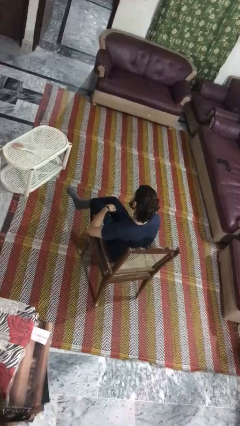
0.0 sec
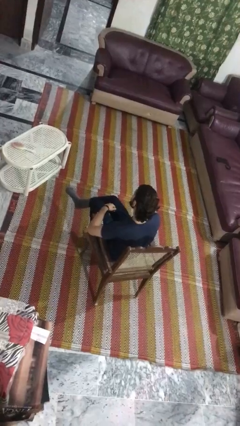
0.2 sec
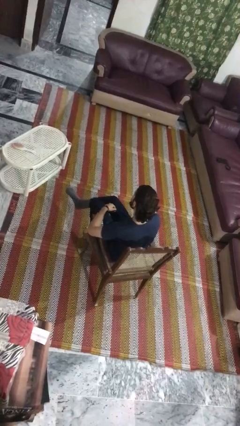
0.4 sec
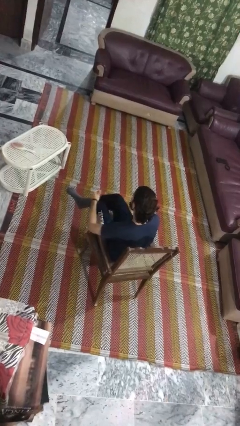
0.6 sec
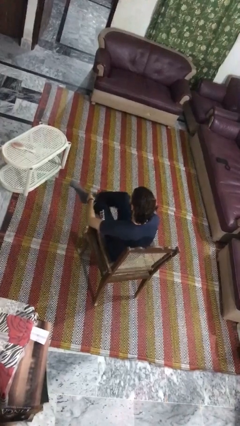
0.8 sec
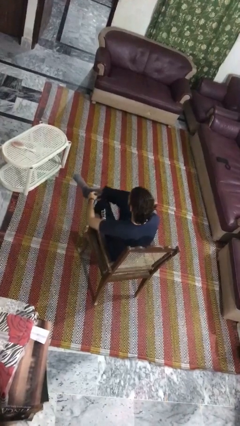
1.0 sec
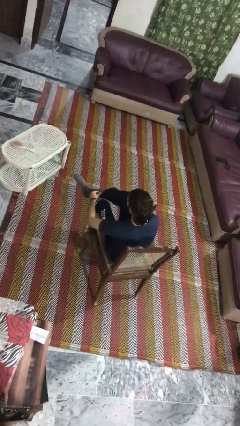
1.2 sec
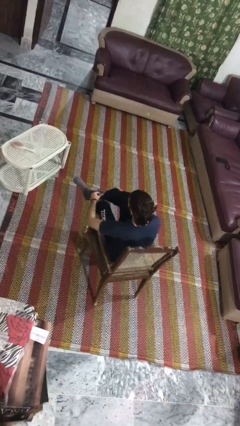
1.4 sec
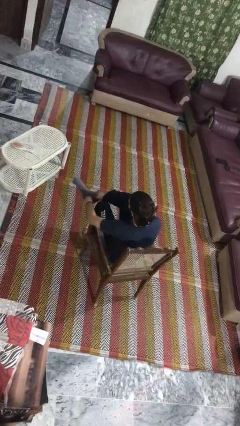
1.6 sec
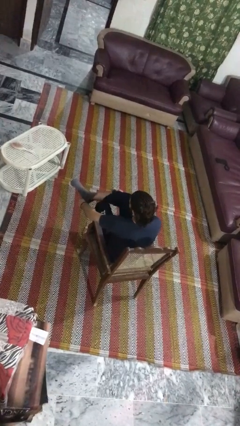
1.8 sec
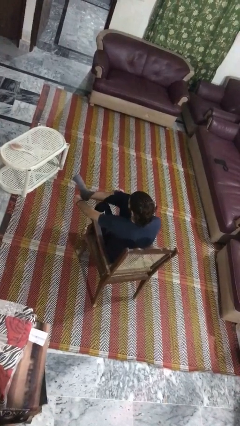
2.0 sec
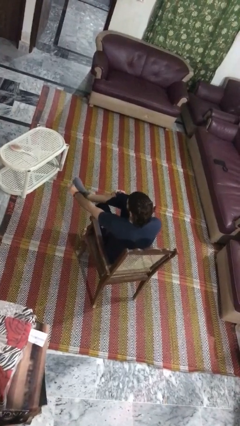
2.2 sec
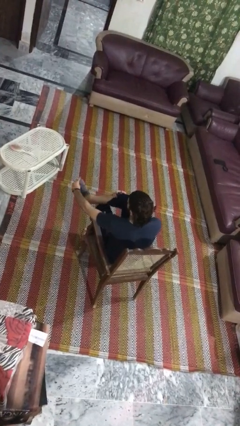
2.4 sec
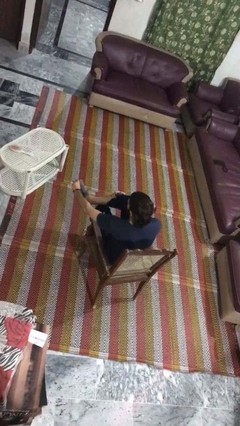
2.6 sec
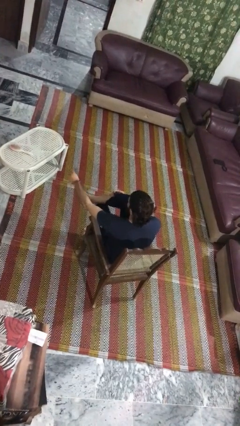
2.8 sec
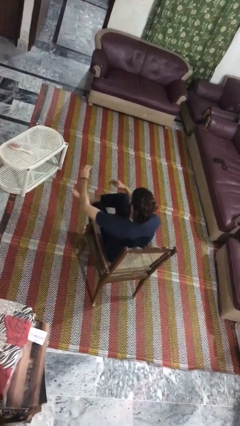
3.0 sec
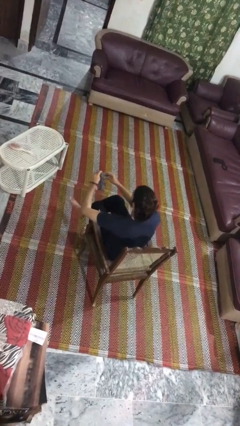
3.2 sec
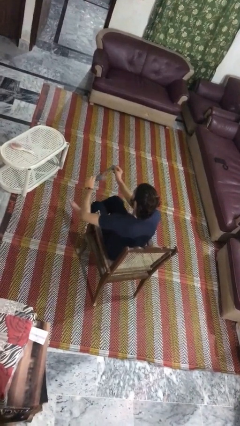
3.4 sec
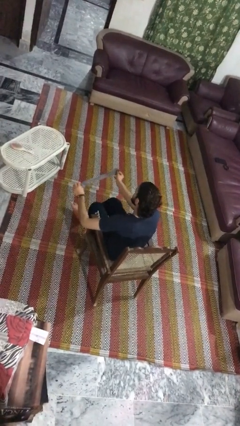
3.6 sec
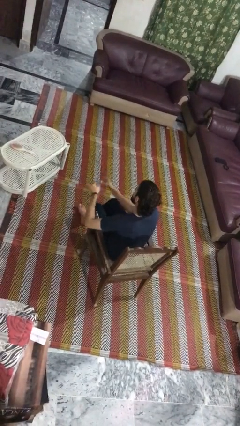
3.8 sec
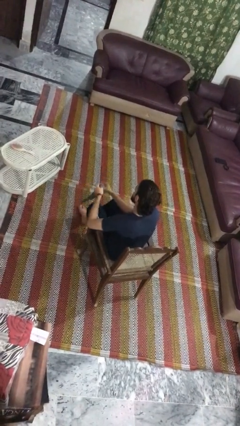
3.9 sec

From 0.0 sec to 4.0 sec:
person takes off socks

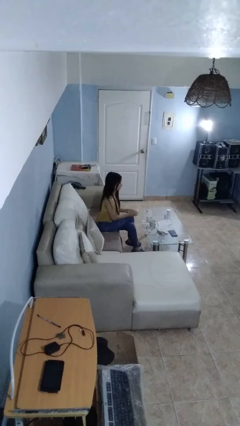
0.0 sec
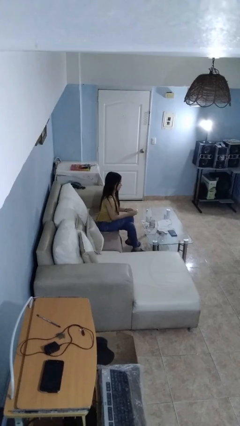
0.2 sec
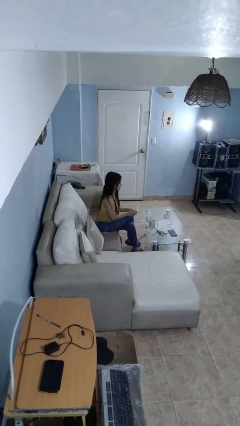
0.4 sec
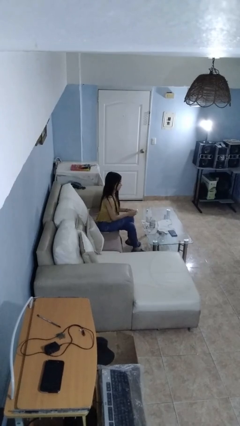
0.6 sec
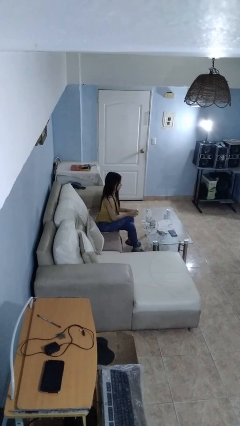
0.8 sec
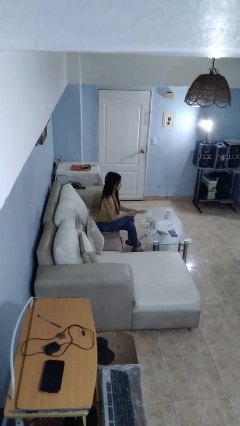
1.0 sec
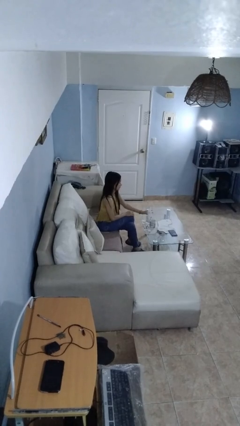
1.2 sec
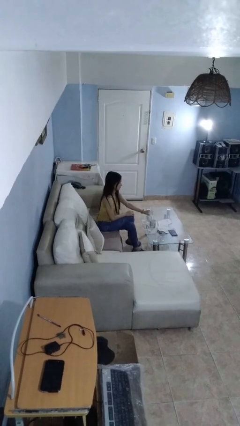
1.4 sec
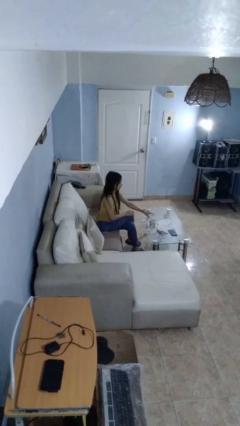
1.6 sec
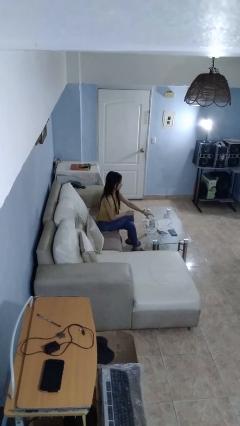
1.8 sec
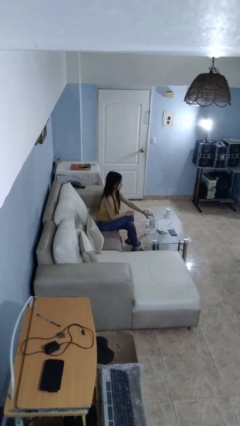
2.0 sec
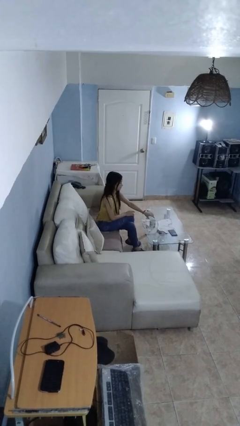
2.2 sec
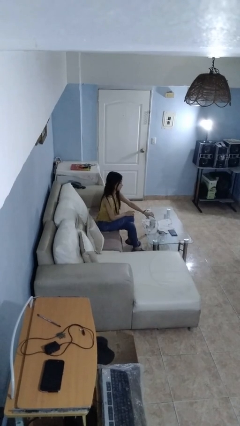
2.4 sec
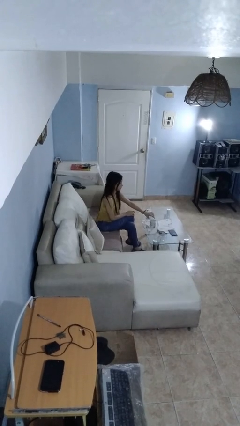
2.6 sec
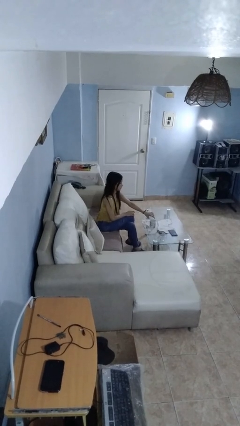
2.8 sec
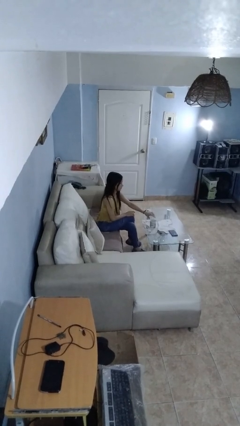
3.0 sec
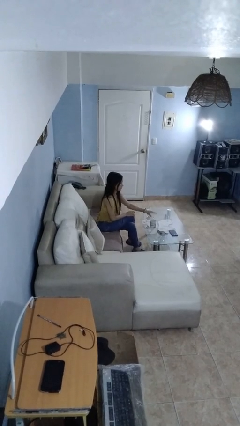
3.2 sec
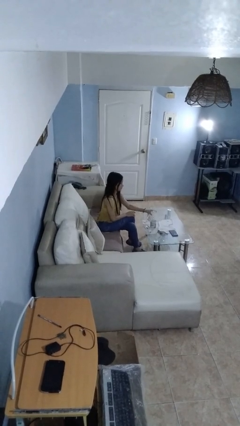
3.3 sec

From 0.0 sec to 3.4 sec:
person pours liquid into cup

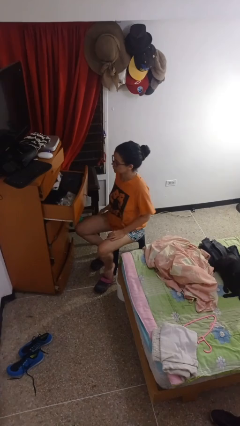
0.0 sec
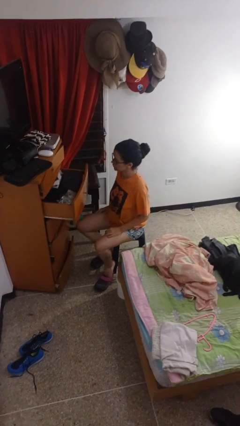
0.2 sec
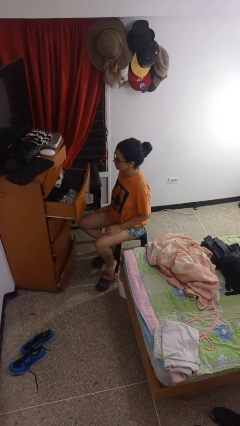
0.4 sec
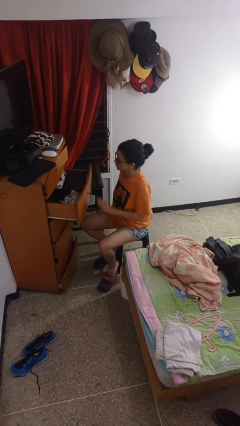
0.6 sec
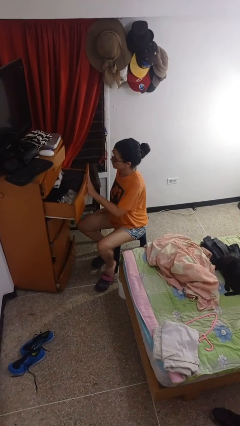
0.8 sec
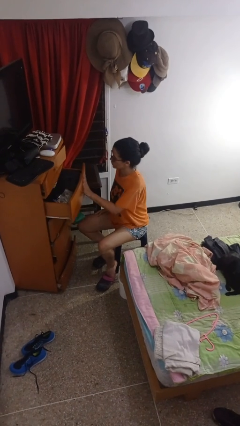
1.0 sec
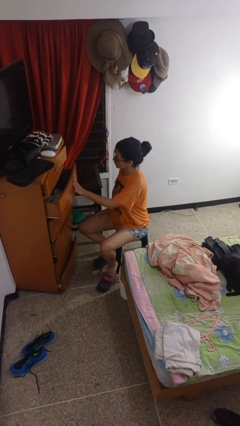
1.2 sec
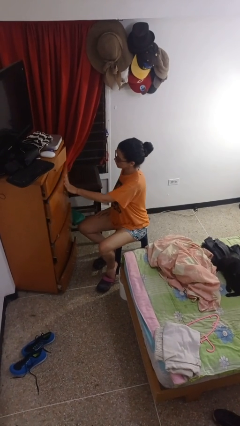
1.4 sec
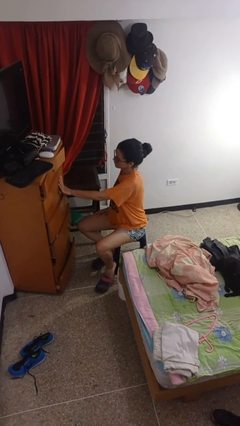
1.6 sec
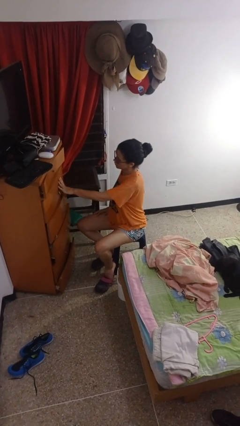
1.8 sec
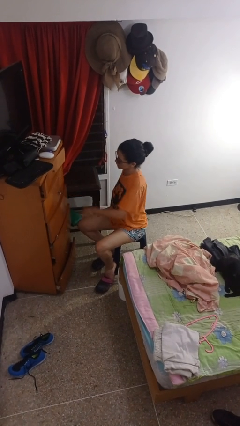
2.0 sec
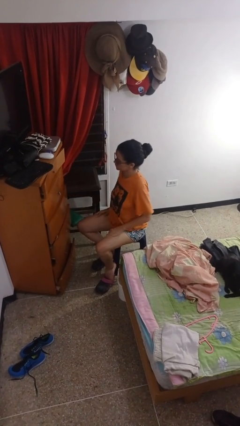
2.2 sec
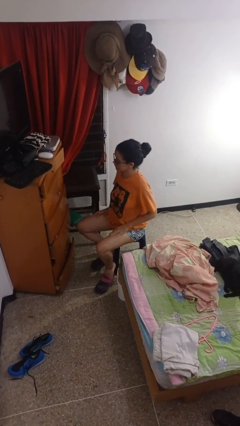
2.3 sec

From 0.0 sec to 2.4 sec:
person closes dresser drawer

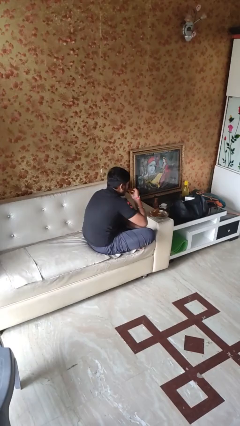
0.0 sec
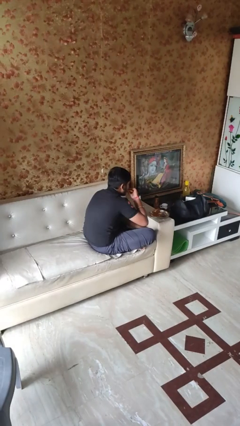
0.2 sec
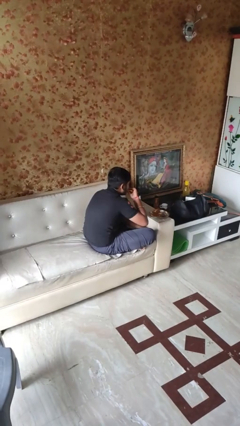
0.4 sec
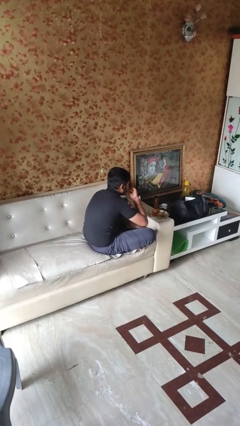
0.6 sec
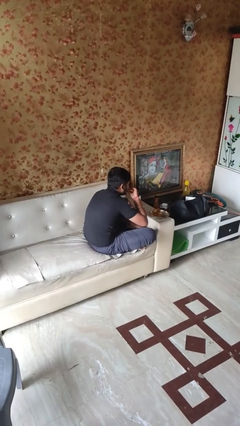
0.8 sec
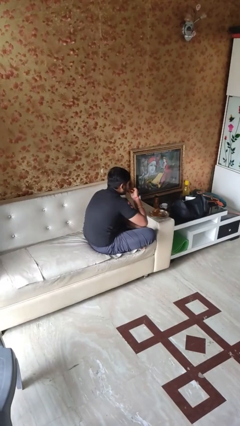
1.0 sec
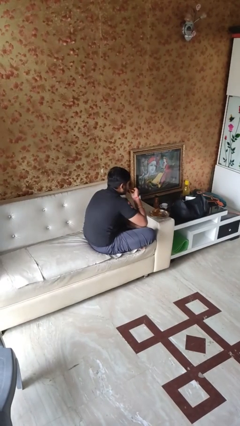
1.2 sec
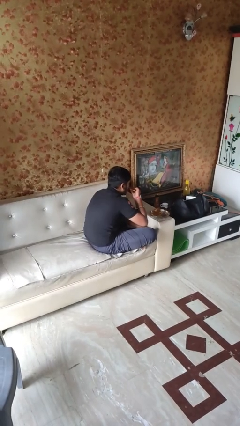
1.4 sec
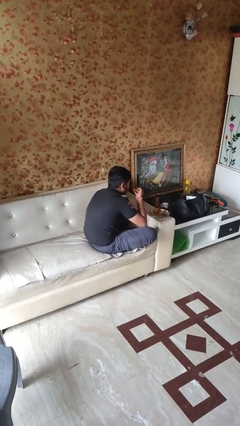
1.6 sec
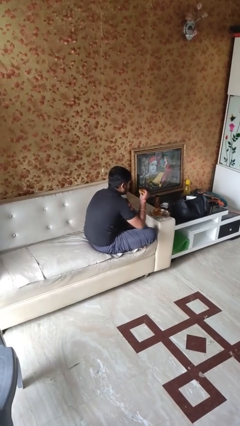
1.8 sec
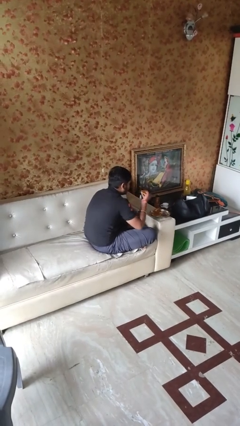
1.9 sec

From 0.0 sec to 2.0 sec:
person eats with hands

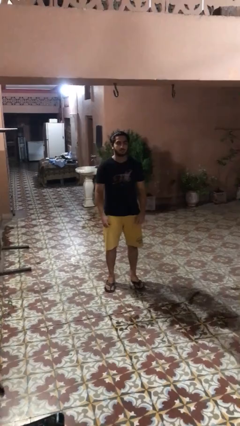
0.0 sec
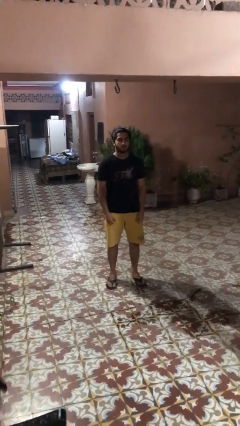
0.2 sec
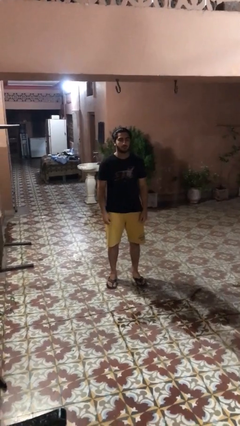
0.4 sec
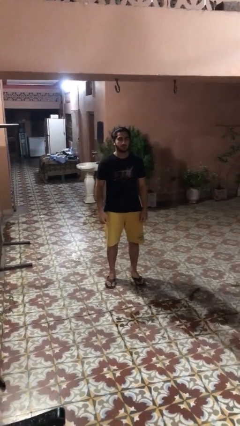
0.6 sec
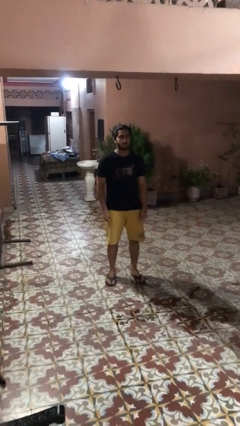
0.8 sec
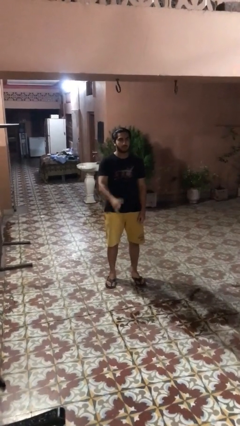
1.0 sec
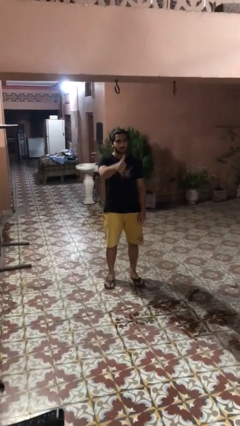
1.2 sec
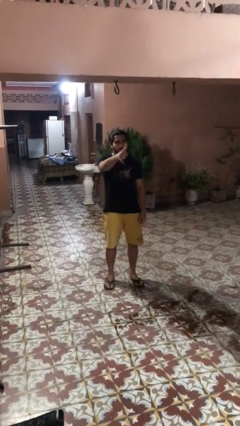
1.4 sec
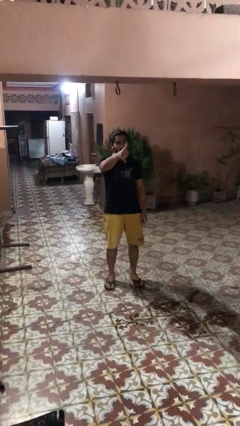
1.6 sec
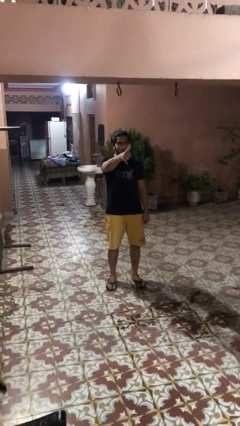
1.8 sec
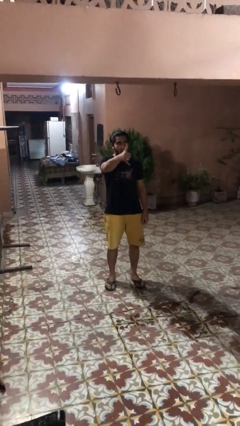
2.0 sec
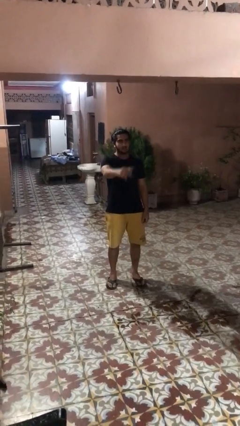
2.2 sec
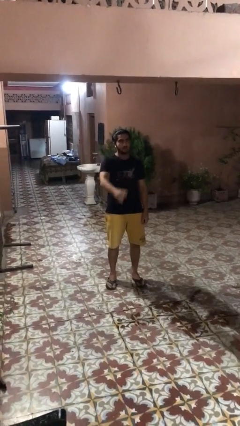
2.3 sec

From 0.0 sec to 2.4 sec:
person gestures hang loose

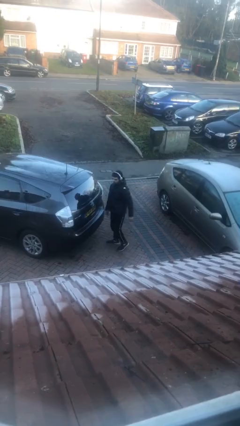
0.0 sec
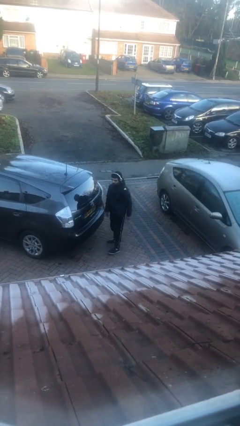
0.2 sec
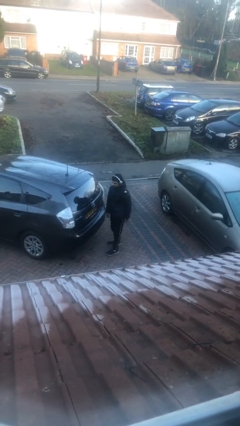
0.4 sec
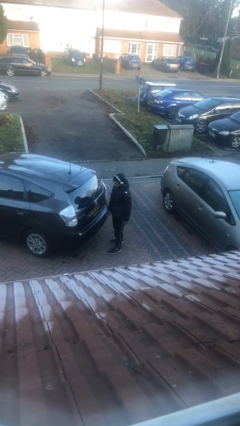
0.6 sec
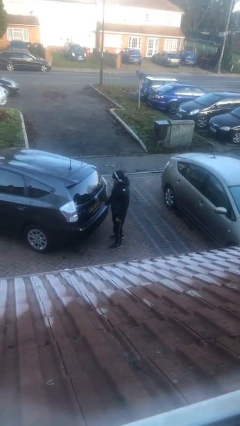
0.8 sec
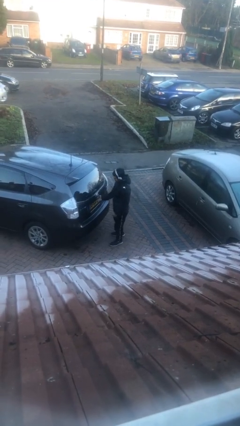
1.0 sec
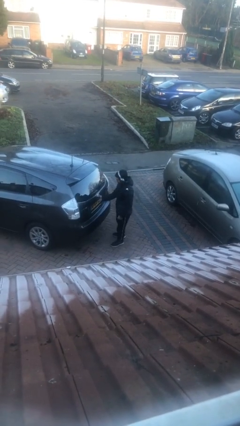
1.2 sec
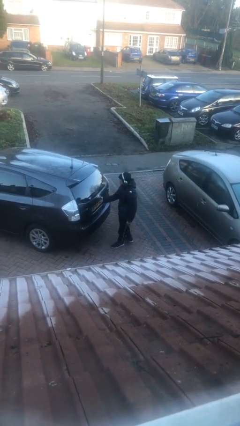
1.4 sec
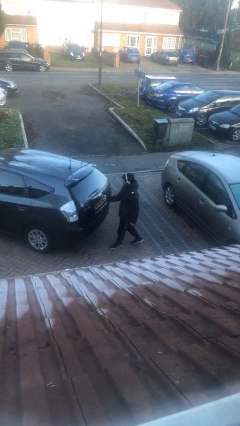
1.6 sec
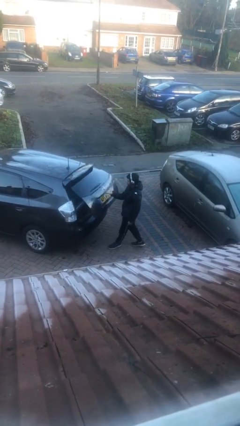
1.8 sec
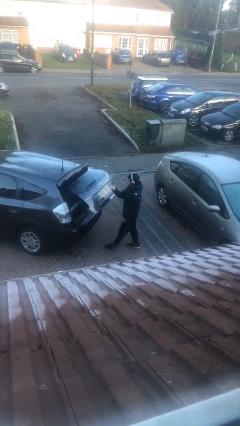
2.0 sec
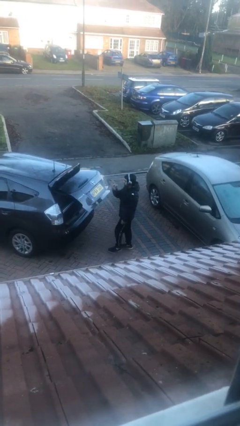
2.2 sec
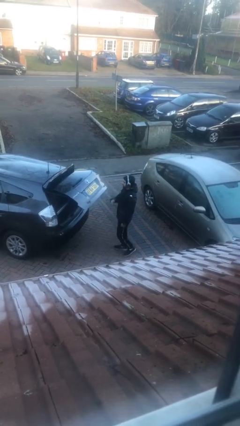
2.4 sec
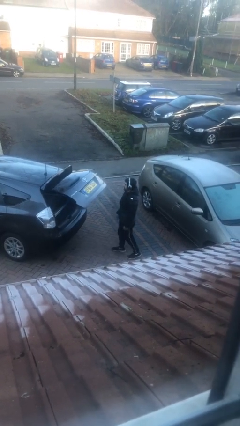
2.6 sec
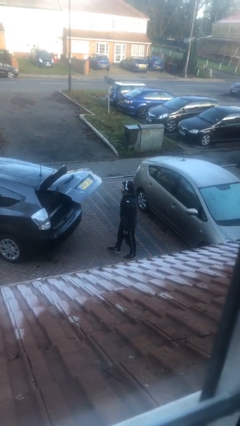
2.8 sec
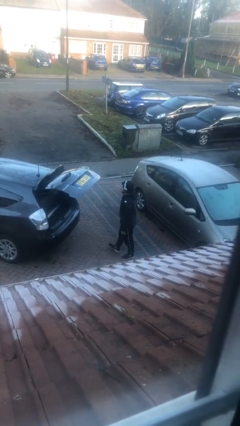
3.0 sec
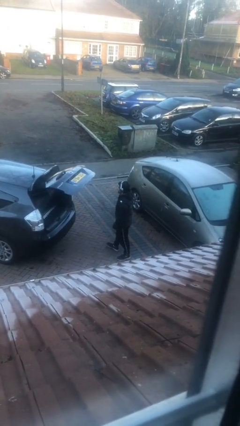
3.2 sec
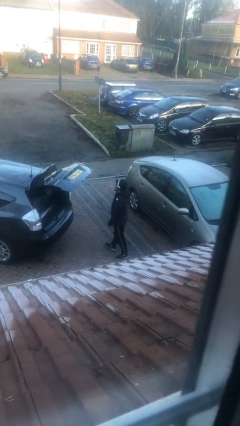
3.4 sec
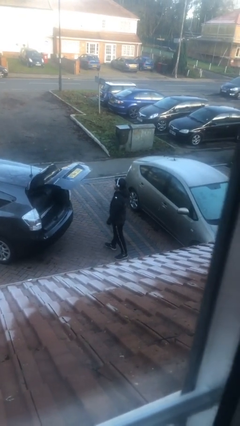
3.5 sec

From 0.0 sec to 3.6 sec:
person opens car trunk
